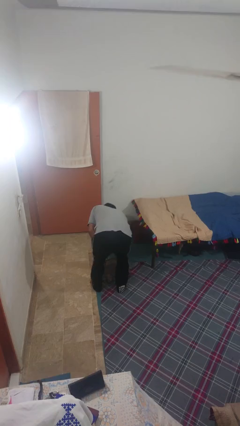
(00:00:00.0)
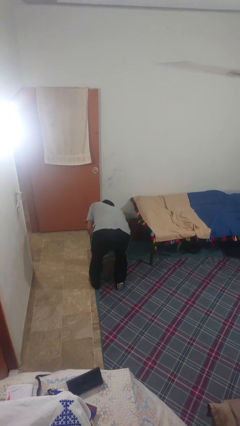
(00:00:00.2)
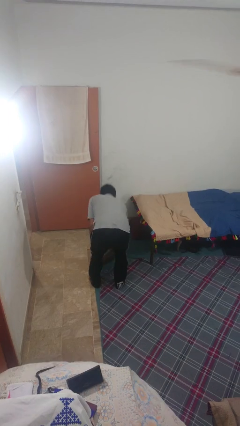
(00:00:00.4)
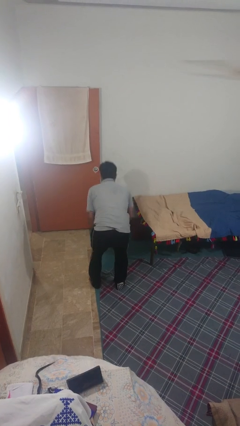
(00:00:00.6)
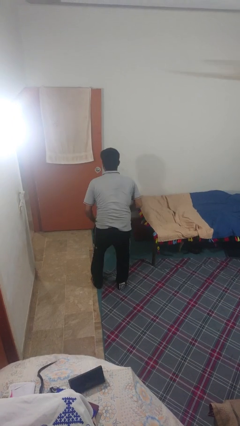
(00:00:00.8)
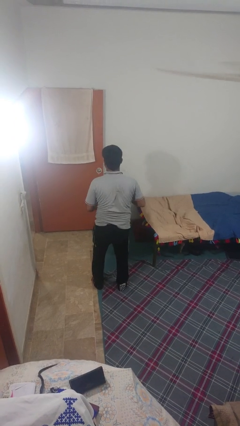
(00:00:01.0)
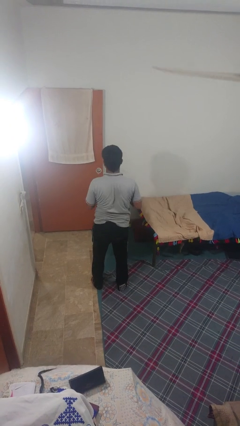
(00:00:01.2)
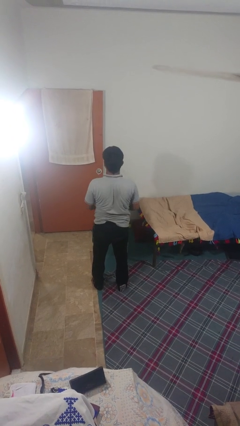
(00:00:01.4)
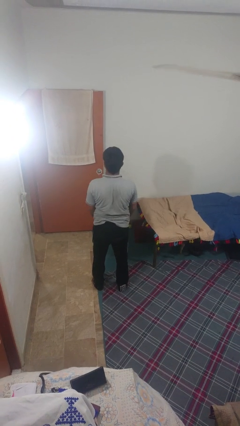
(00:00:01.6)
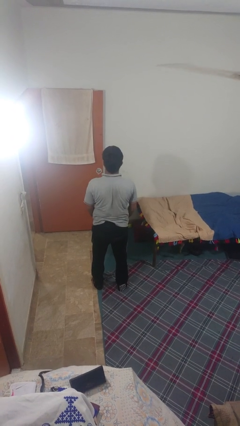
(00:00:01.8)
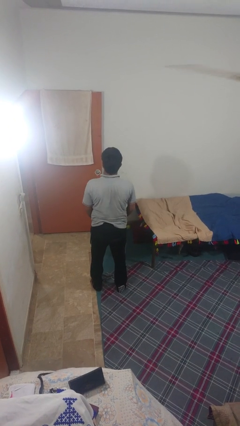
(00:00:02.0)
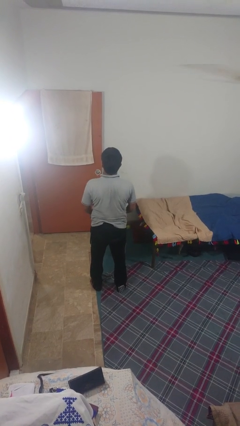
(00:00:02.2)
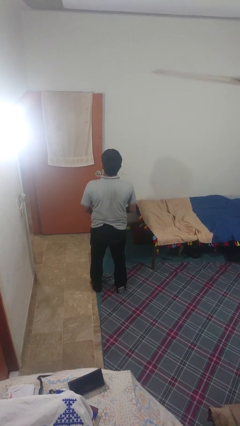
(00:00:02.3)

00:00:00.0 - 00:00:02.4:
person picks up object from floor

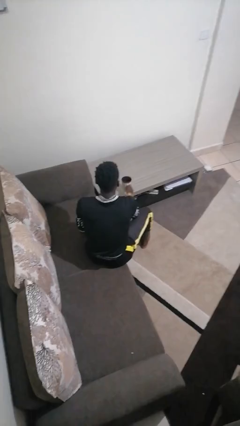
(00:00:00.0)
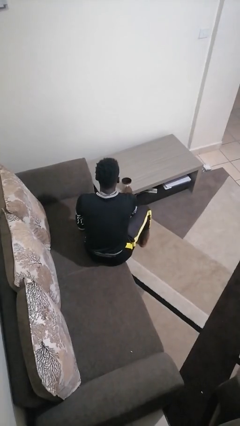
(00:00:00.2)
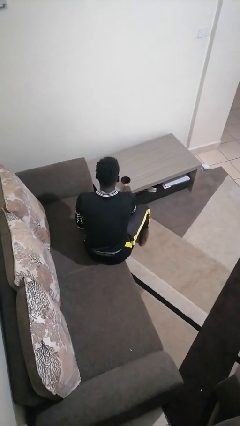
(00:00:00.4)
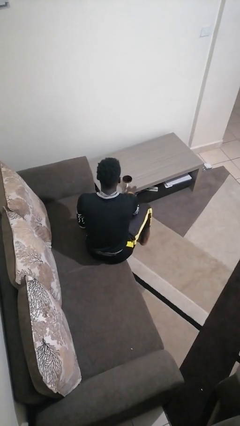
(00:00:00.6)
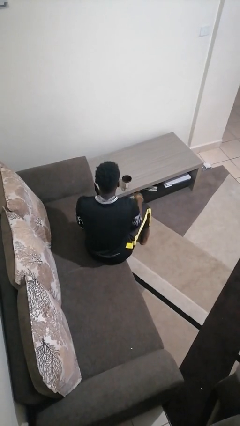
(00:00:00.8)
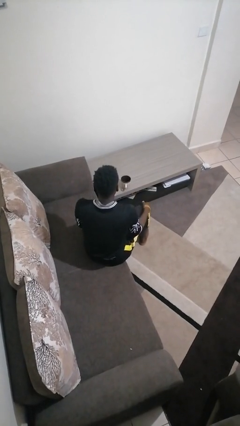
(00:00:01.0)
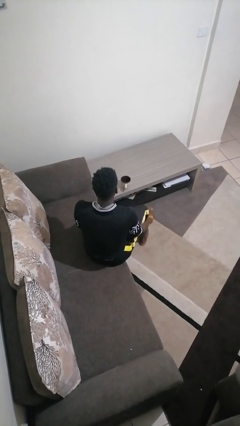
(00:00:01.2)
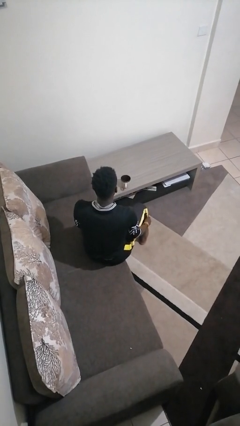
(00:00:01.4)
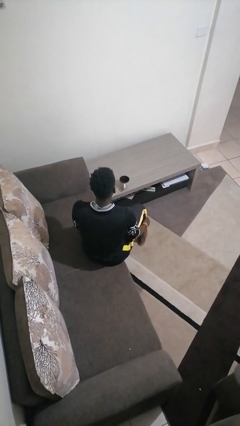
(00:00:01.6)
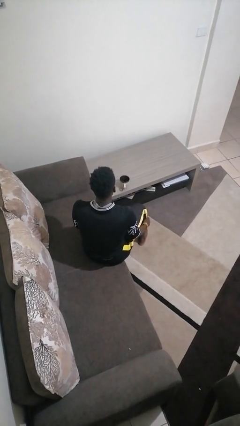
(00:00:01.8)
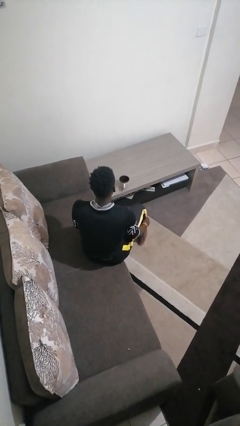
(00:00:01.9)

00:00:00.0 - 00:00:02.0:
person puts down object on table

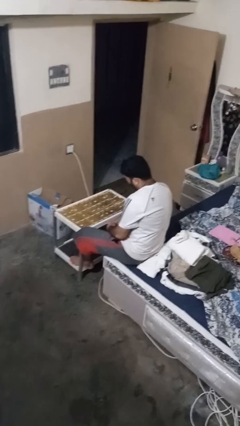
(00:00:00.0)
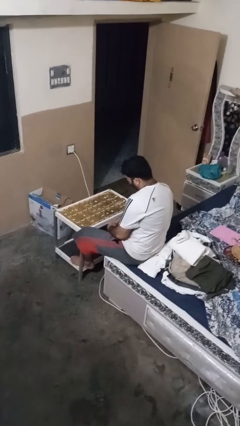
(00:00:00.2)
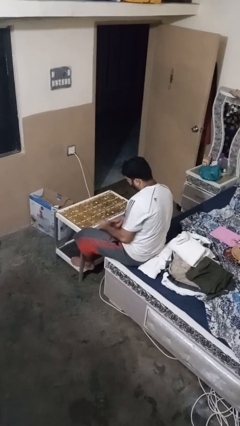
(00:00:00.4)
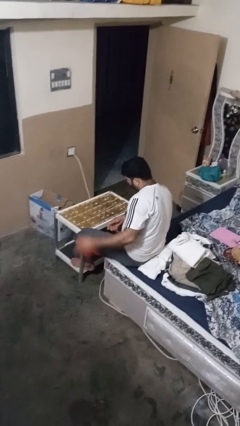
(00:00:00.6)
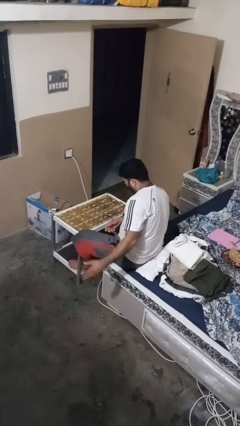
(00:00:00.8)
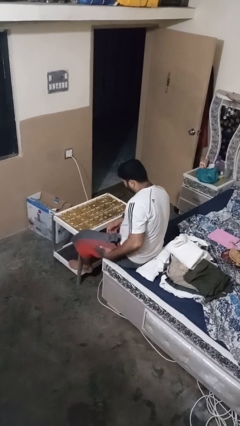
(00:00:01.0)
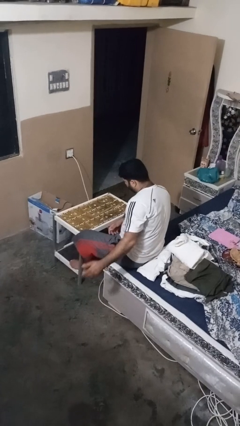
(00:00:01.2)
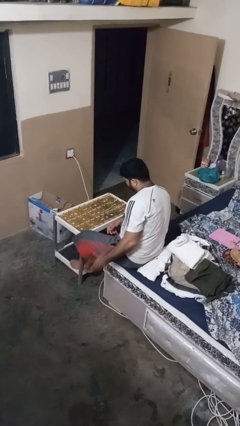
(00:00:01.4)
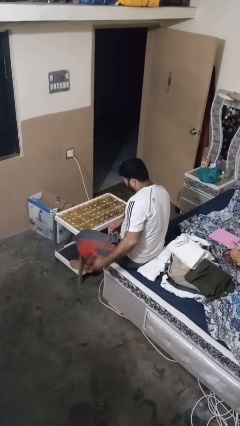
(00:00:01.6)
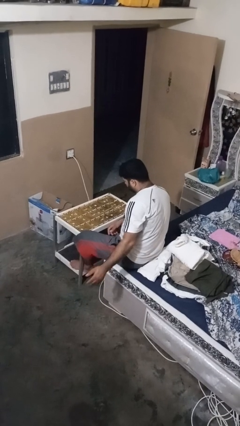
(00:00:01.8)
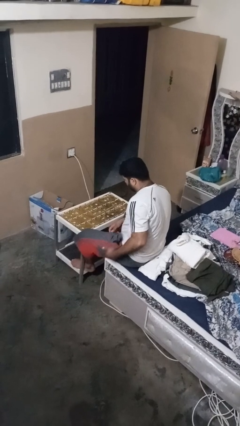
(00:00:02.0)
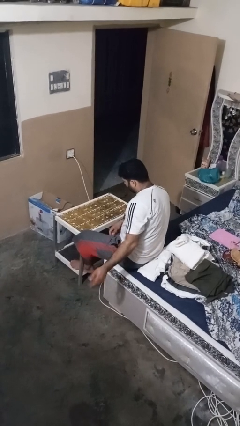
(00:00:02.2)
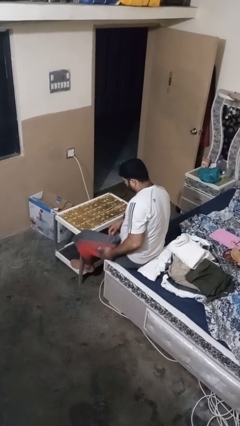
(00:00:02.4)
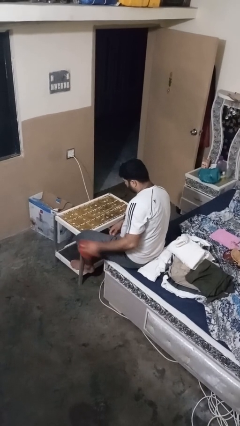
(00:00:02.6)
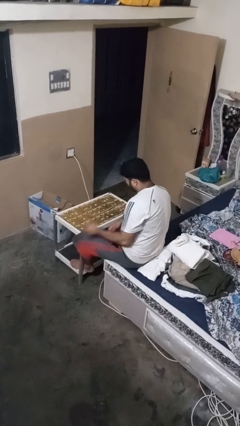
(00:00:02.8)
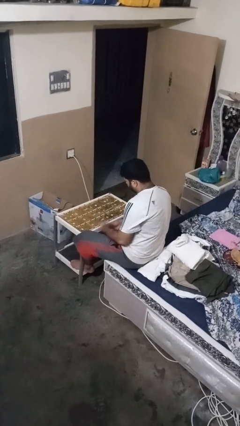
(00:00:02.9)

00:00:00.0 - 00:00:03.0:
person slaps hands on thighs

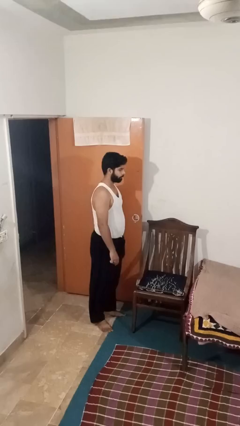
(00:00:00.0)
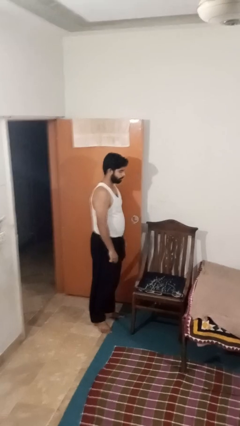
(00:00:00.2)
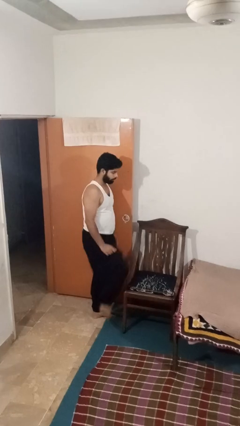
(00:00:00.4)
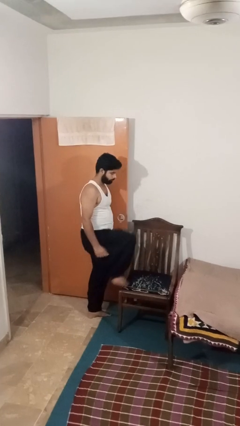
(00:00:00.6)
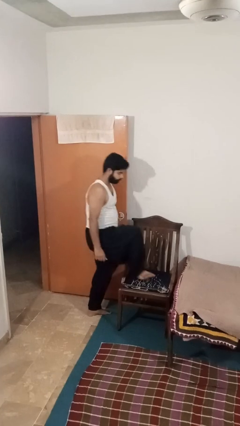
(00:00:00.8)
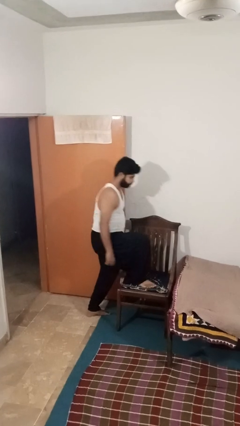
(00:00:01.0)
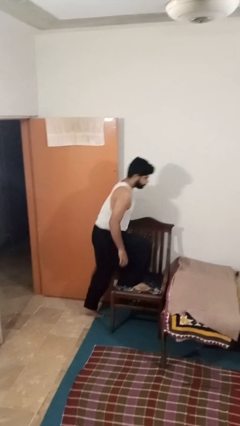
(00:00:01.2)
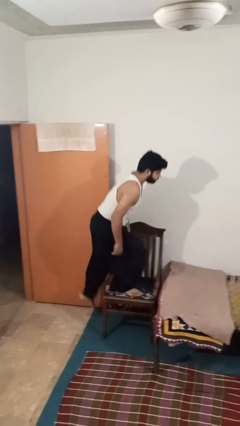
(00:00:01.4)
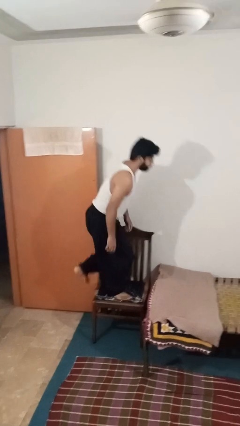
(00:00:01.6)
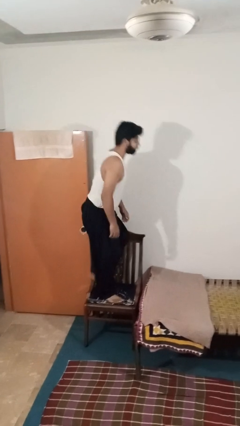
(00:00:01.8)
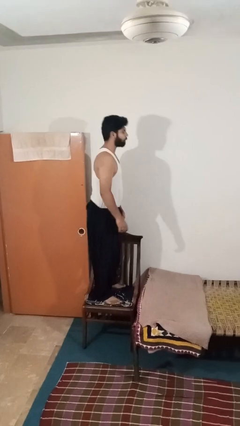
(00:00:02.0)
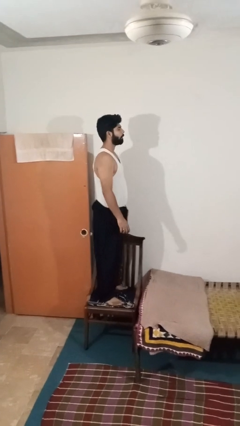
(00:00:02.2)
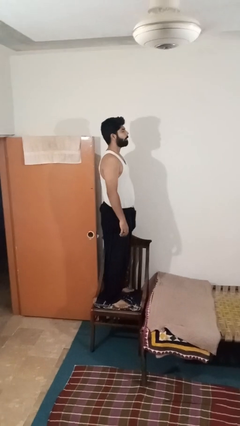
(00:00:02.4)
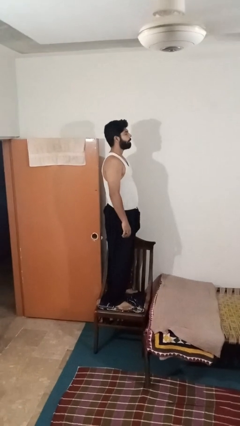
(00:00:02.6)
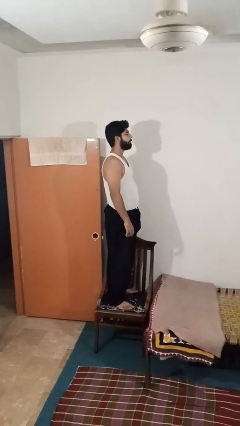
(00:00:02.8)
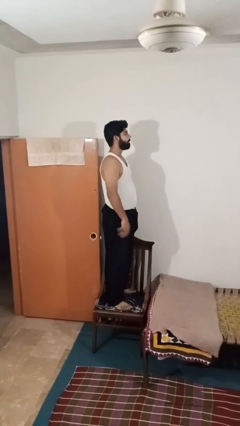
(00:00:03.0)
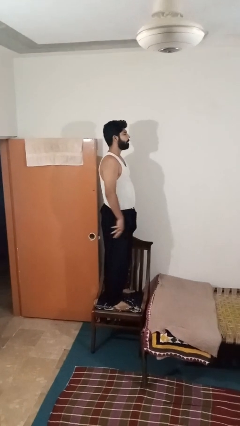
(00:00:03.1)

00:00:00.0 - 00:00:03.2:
person climbs on chair

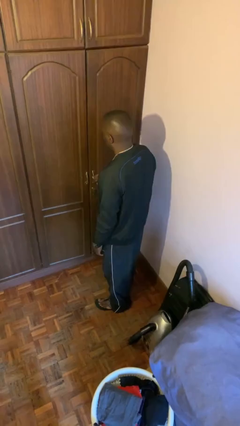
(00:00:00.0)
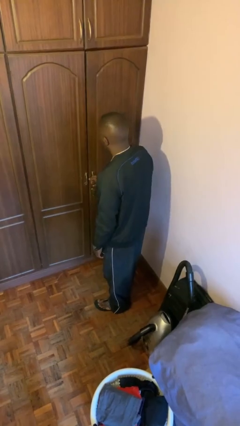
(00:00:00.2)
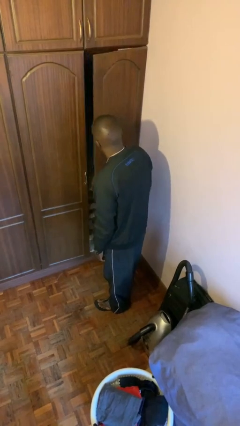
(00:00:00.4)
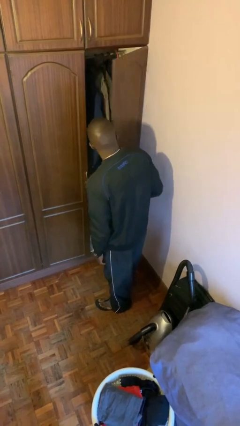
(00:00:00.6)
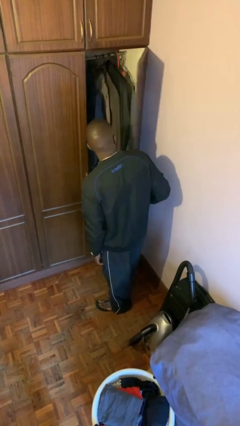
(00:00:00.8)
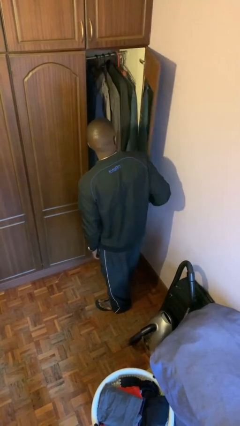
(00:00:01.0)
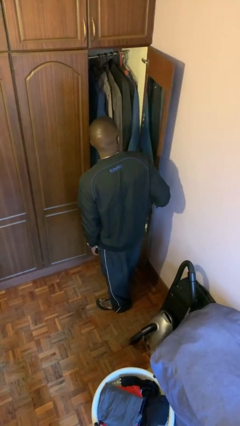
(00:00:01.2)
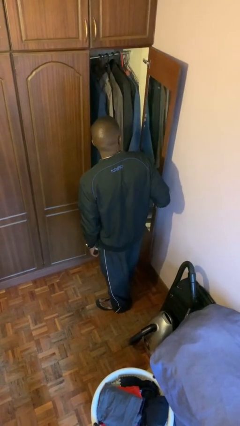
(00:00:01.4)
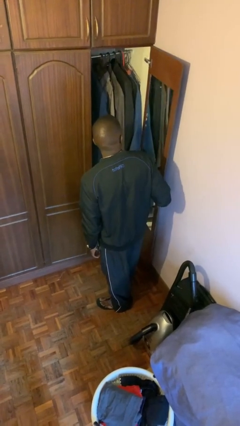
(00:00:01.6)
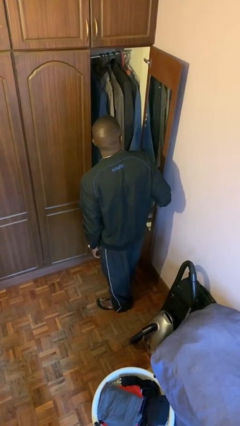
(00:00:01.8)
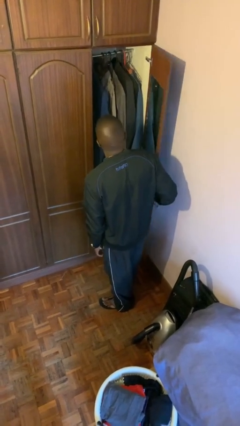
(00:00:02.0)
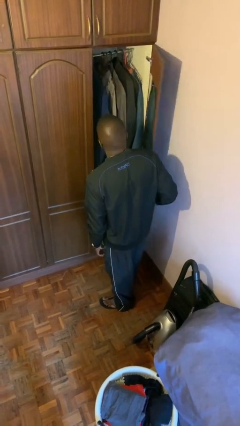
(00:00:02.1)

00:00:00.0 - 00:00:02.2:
person opens closet door

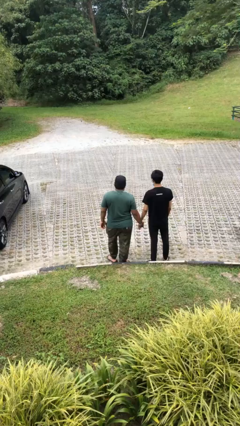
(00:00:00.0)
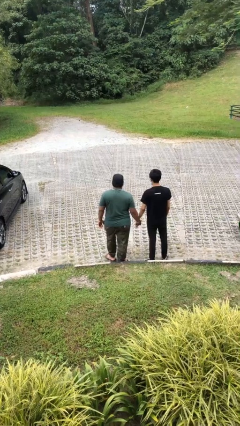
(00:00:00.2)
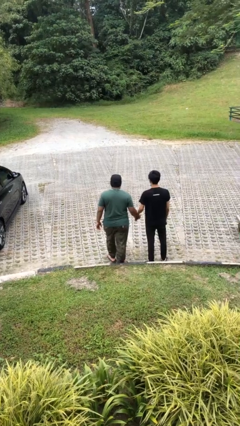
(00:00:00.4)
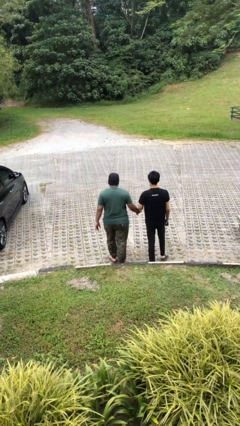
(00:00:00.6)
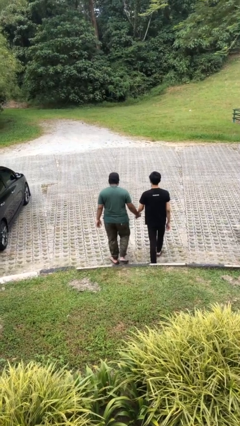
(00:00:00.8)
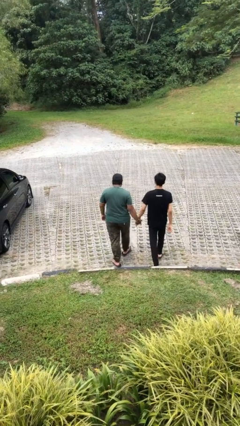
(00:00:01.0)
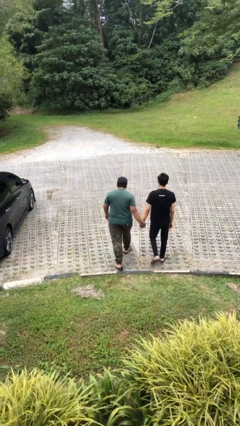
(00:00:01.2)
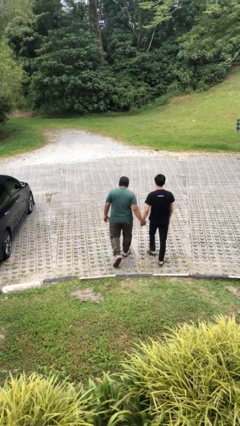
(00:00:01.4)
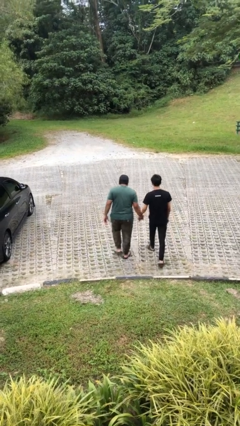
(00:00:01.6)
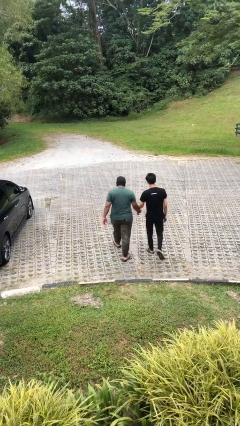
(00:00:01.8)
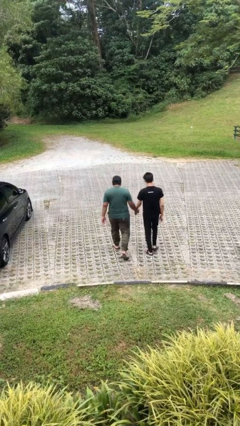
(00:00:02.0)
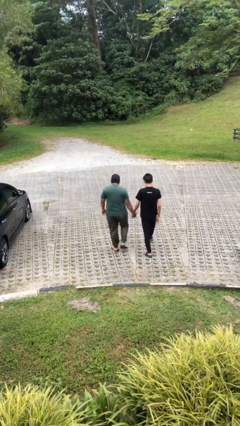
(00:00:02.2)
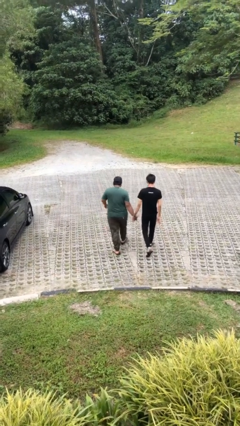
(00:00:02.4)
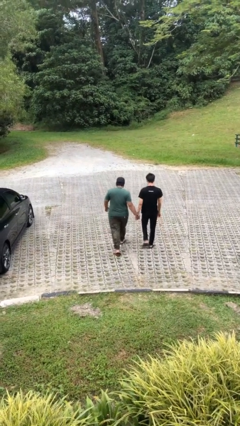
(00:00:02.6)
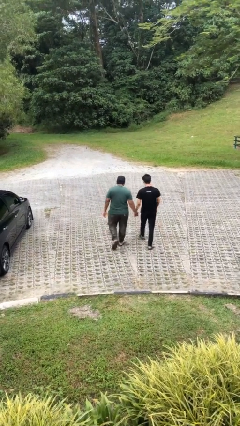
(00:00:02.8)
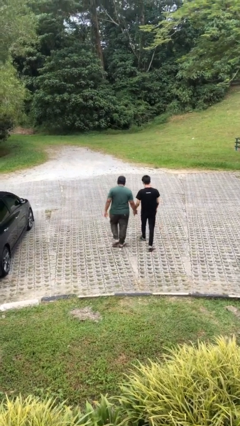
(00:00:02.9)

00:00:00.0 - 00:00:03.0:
person holds hand

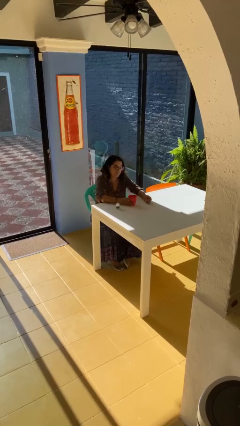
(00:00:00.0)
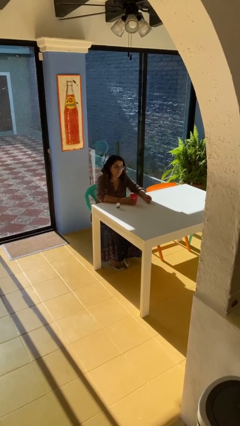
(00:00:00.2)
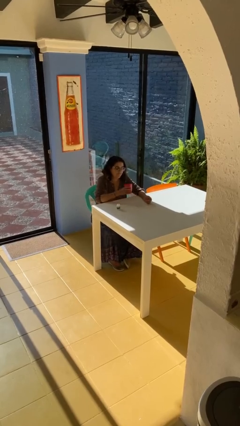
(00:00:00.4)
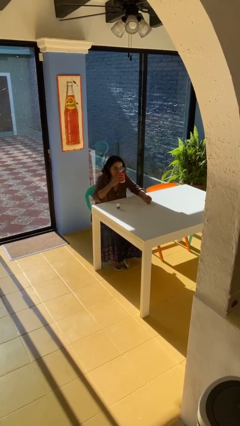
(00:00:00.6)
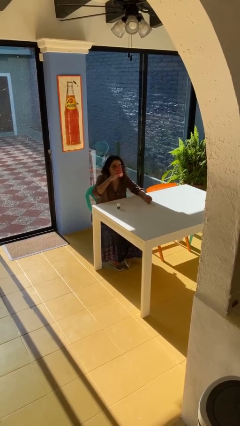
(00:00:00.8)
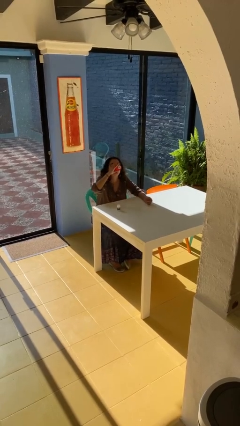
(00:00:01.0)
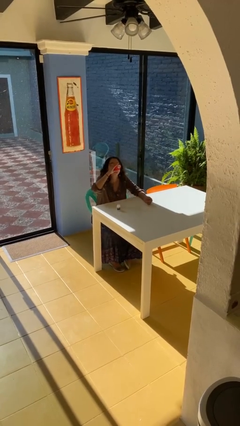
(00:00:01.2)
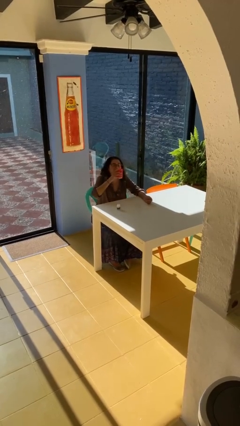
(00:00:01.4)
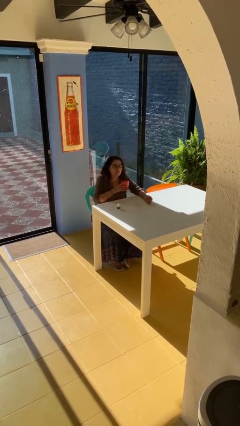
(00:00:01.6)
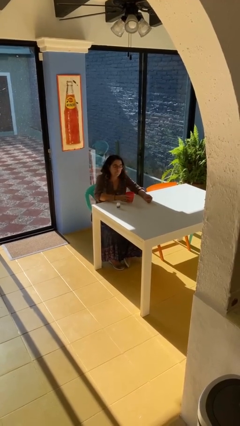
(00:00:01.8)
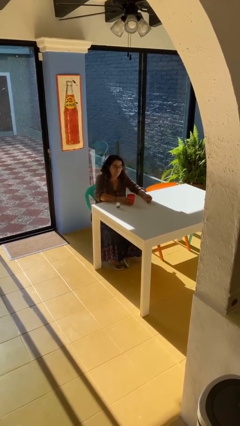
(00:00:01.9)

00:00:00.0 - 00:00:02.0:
person drinks from cup
